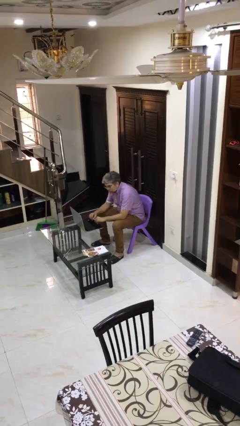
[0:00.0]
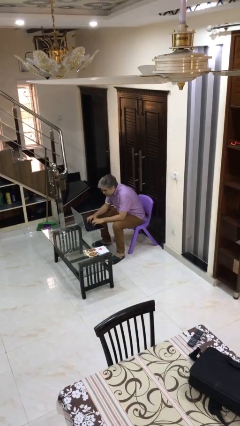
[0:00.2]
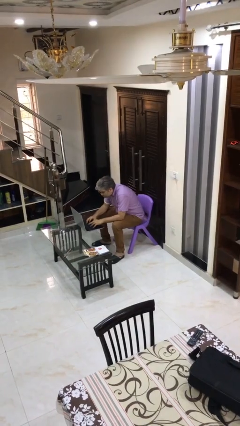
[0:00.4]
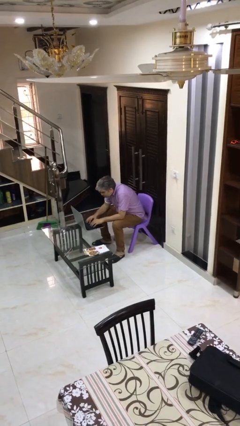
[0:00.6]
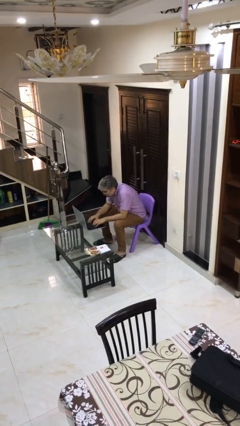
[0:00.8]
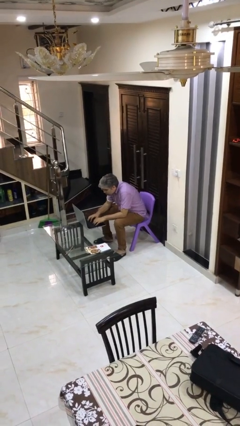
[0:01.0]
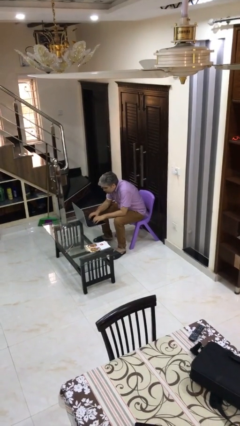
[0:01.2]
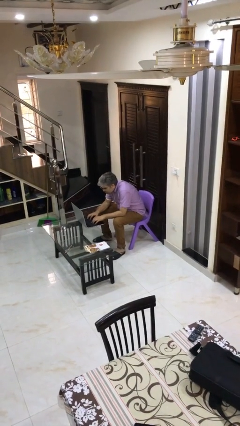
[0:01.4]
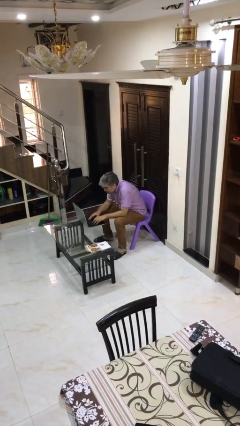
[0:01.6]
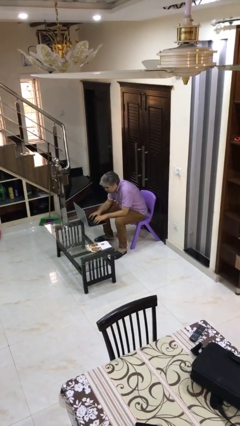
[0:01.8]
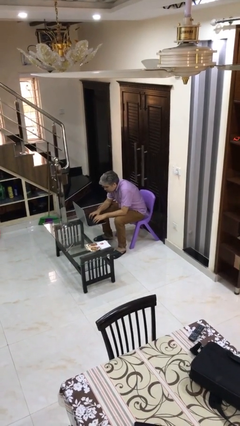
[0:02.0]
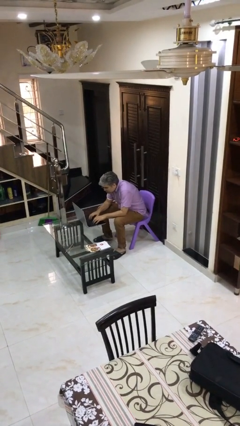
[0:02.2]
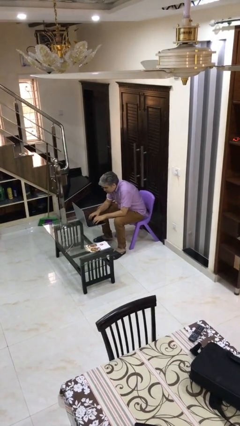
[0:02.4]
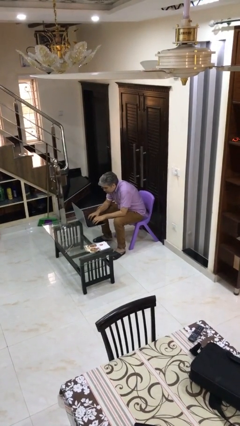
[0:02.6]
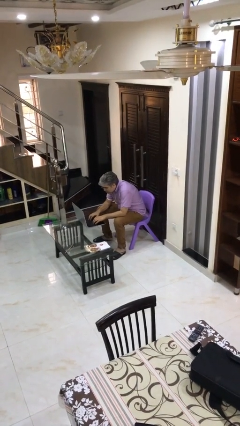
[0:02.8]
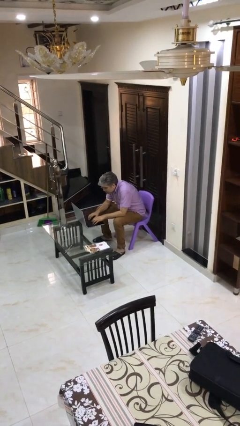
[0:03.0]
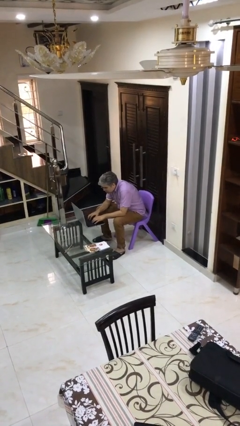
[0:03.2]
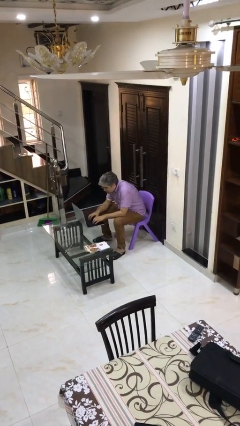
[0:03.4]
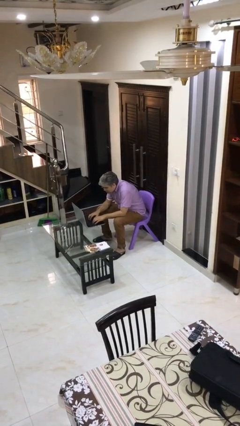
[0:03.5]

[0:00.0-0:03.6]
person interacts with laptop

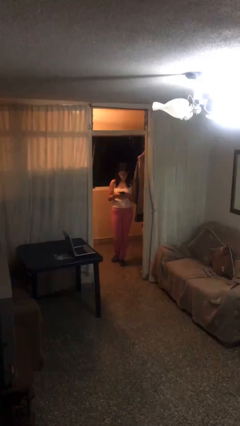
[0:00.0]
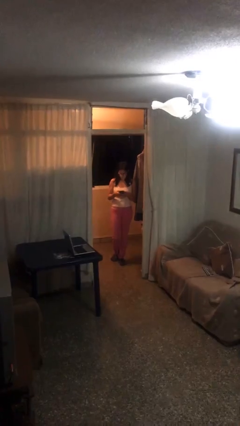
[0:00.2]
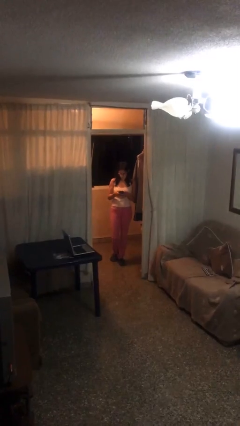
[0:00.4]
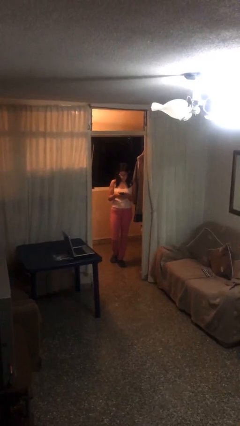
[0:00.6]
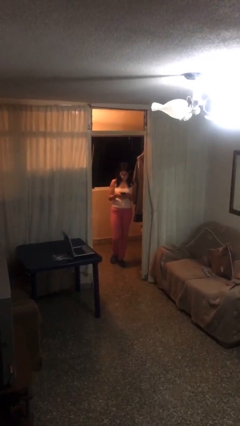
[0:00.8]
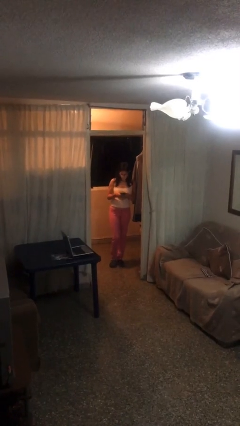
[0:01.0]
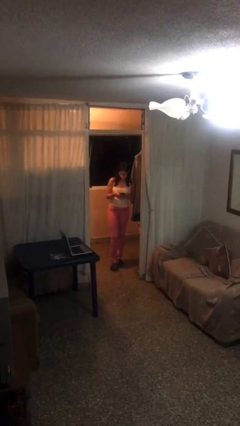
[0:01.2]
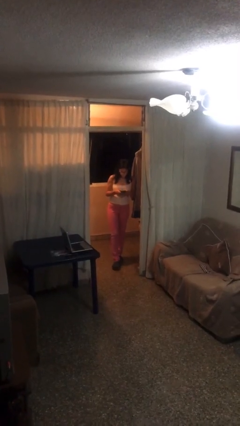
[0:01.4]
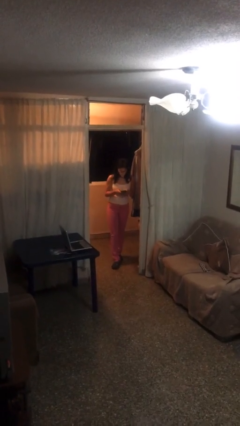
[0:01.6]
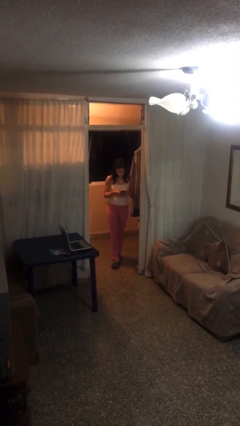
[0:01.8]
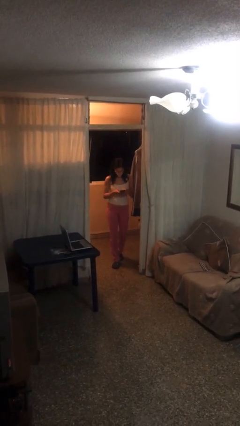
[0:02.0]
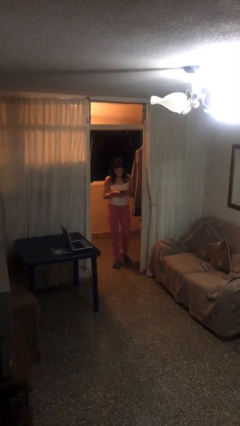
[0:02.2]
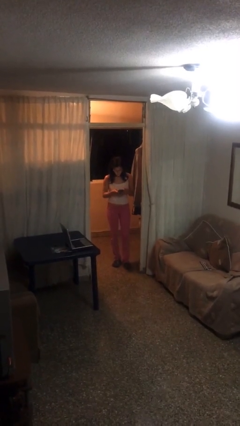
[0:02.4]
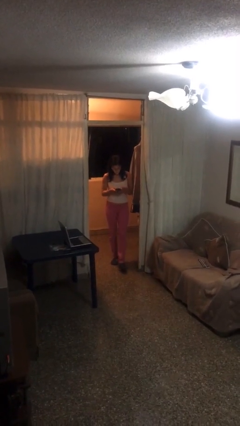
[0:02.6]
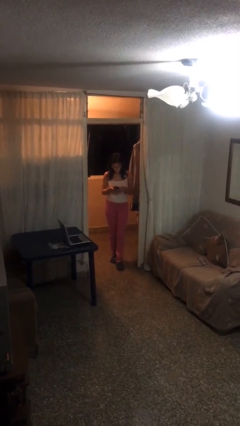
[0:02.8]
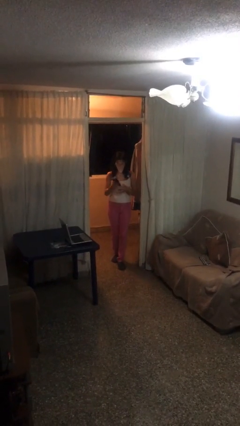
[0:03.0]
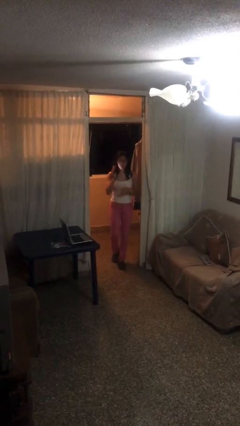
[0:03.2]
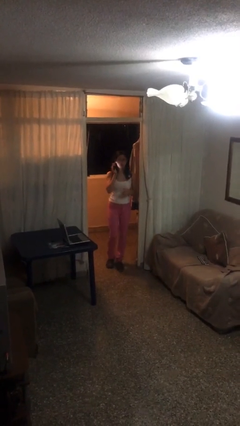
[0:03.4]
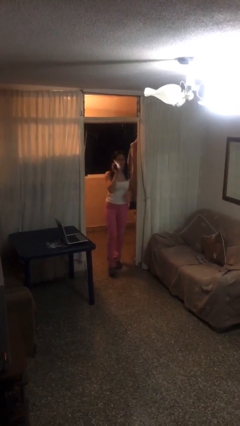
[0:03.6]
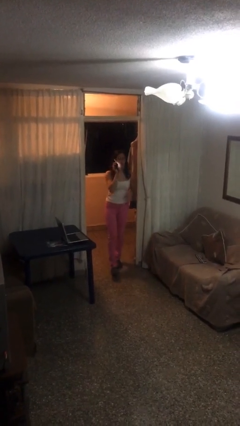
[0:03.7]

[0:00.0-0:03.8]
person texts on phone

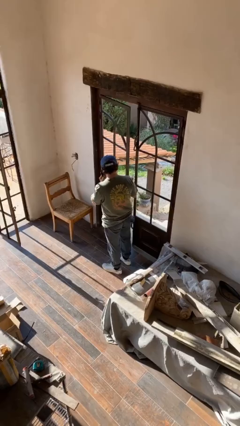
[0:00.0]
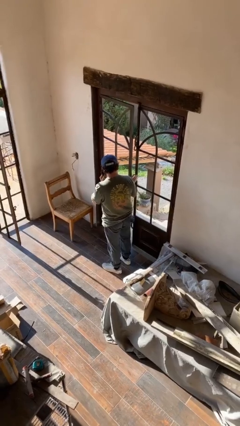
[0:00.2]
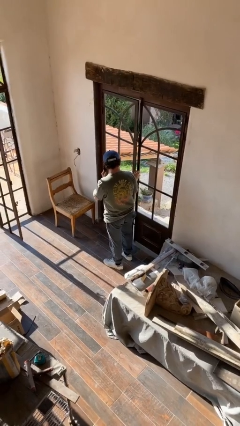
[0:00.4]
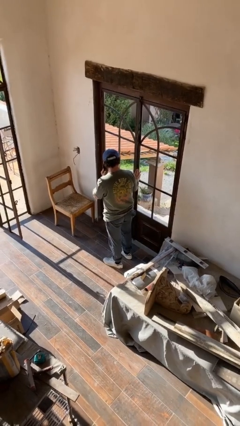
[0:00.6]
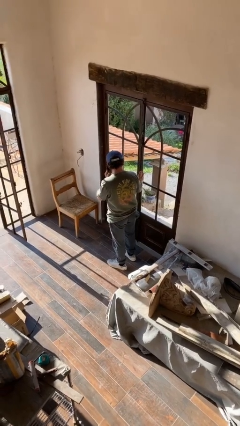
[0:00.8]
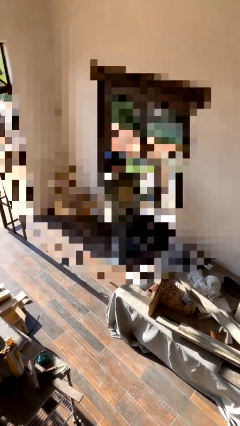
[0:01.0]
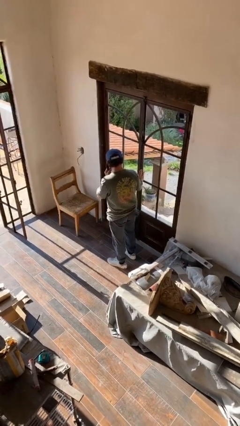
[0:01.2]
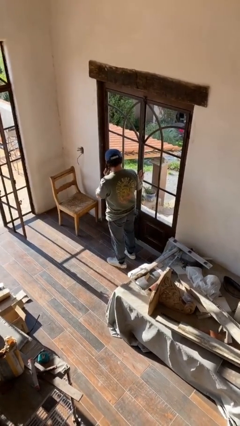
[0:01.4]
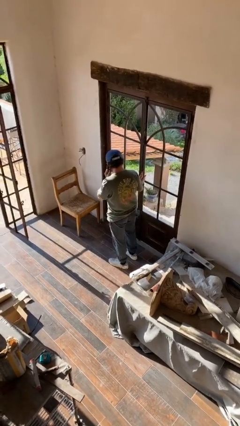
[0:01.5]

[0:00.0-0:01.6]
person closes facility door

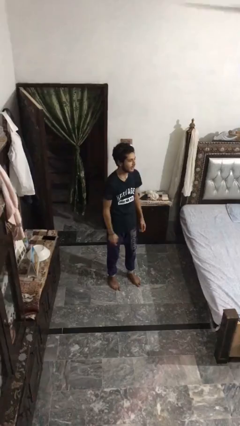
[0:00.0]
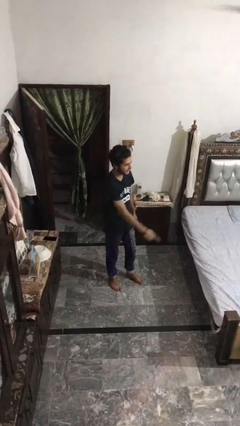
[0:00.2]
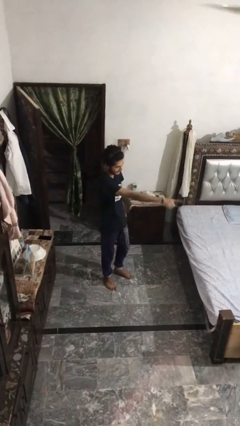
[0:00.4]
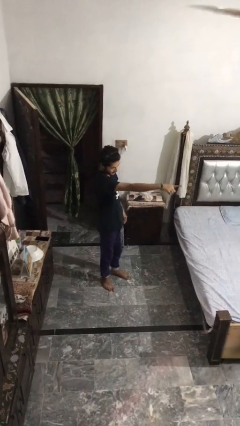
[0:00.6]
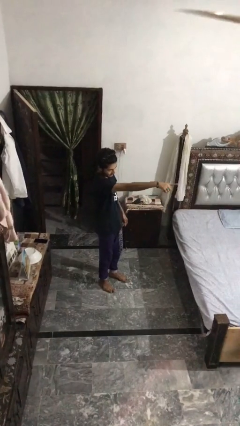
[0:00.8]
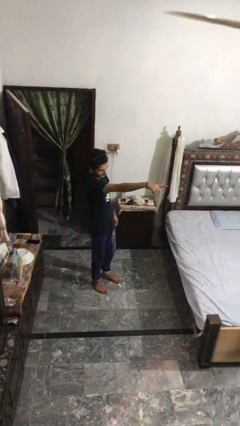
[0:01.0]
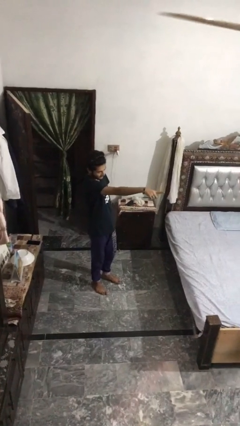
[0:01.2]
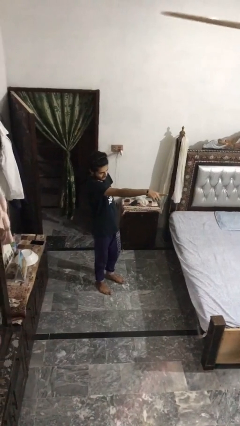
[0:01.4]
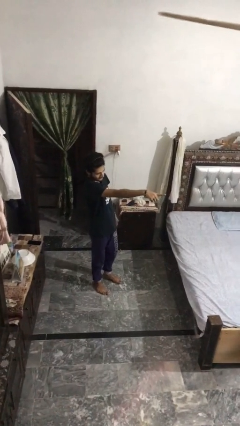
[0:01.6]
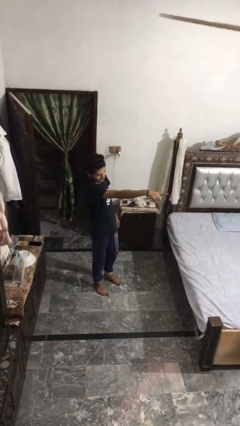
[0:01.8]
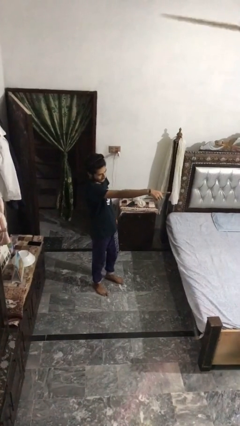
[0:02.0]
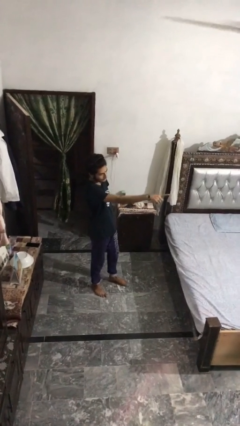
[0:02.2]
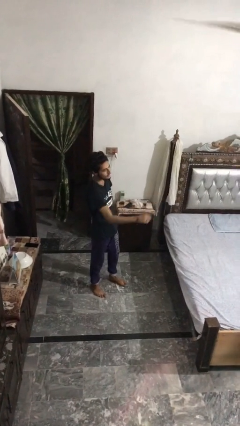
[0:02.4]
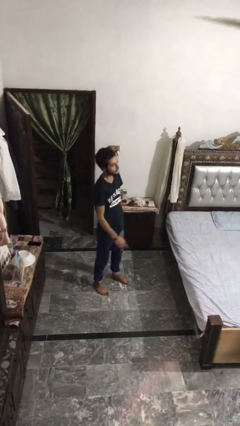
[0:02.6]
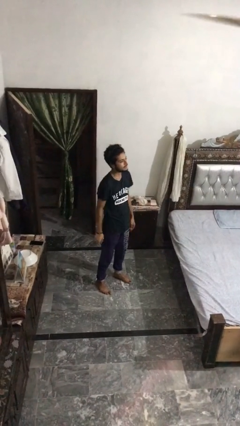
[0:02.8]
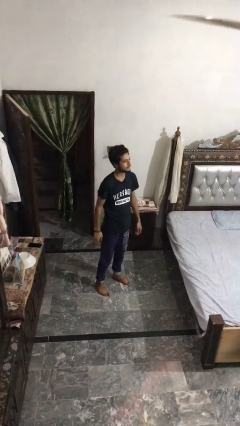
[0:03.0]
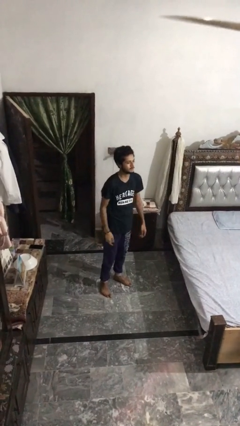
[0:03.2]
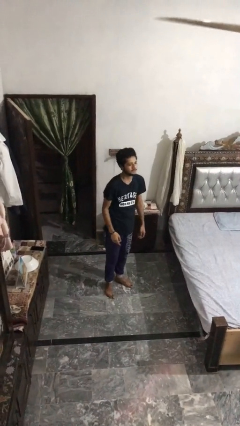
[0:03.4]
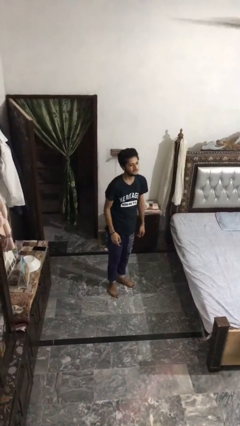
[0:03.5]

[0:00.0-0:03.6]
person points at person

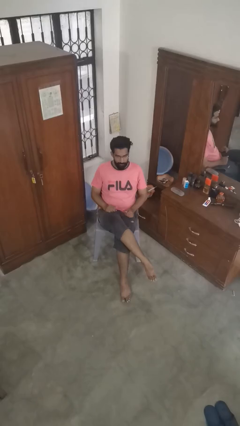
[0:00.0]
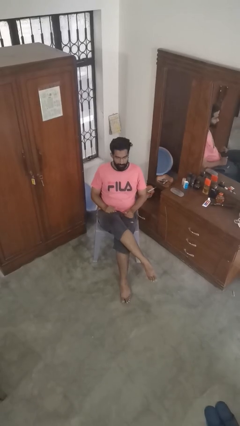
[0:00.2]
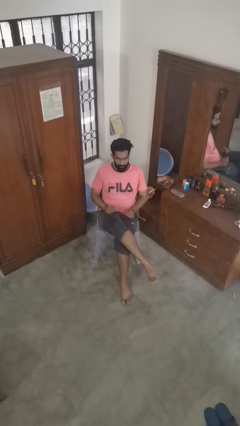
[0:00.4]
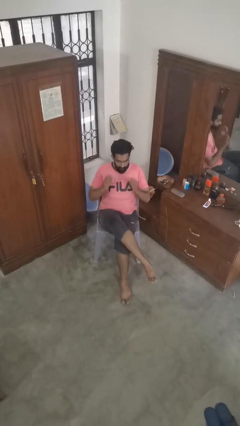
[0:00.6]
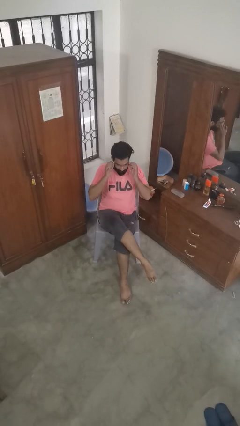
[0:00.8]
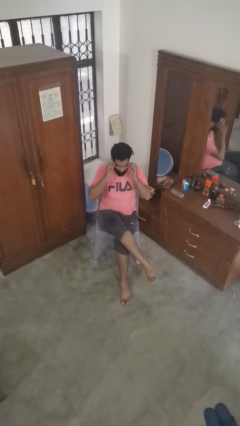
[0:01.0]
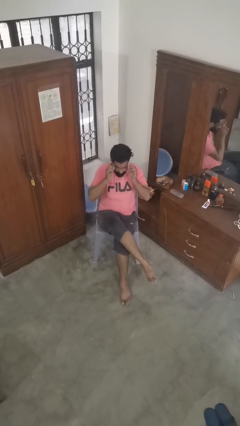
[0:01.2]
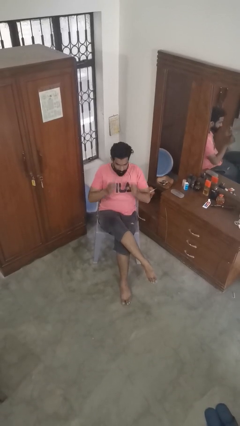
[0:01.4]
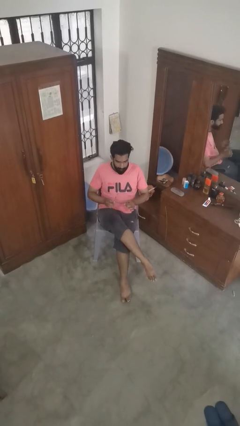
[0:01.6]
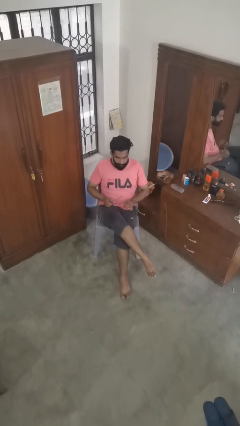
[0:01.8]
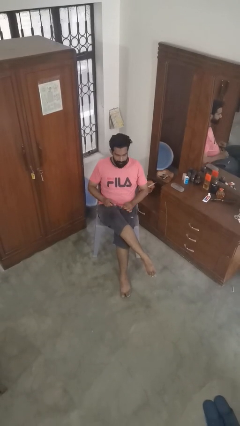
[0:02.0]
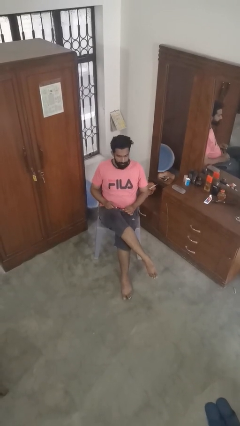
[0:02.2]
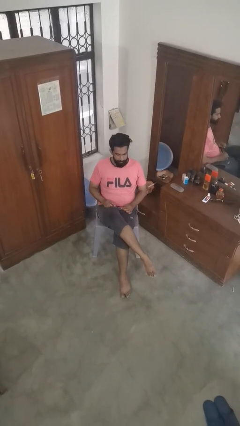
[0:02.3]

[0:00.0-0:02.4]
person takes off glasses

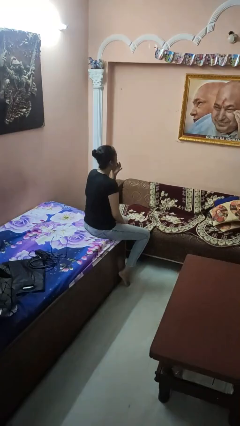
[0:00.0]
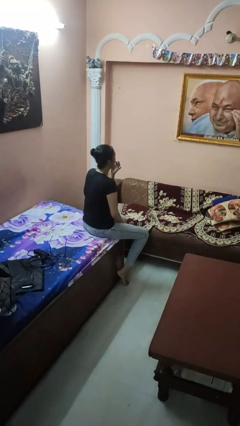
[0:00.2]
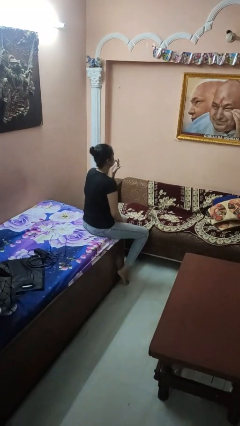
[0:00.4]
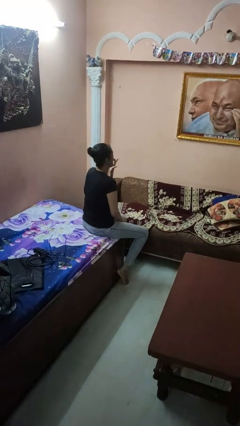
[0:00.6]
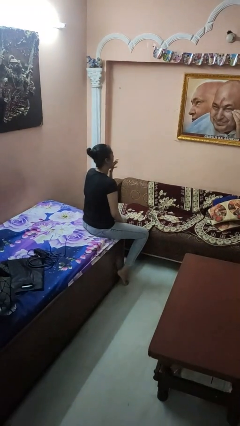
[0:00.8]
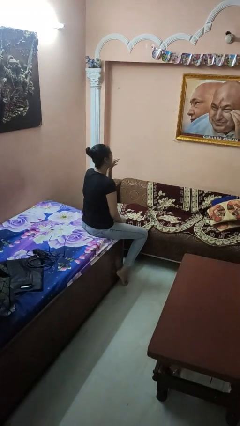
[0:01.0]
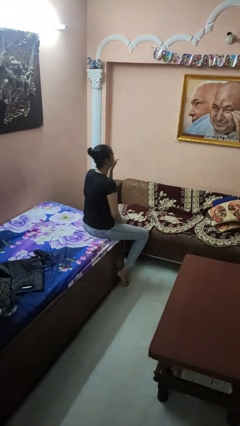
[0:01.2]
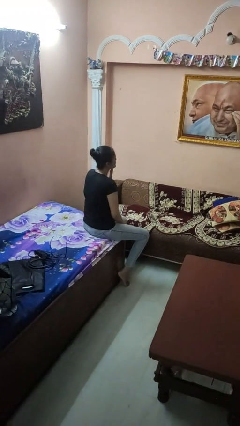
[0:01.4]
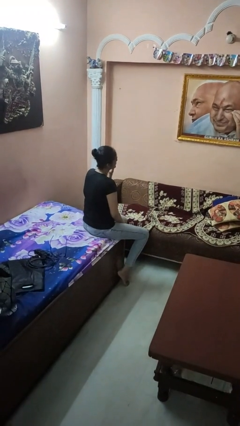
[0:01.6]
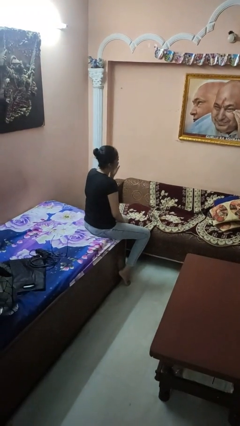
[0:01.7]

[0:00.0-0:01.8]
person licks fingers

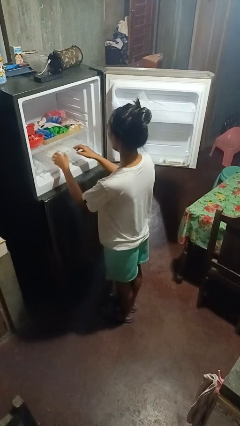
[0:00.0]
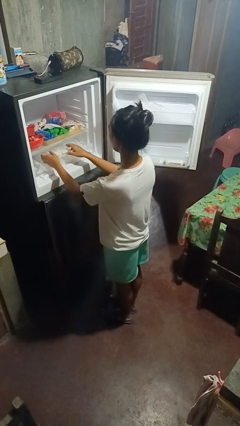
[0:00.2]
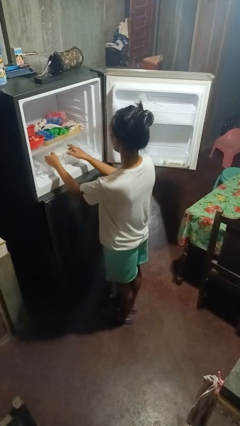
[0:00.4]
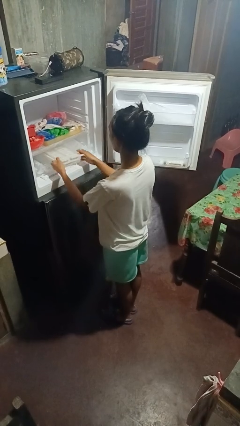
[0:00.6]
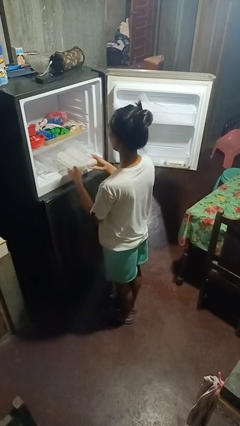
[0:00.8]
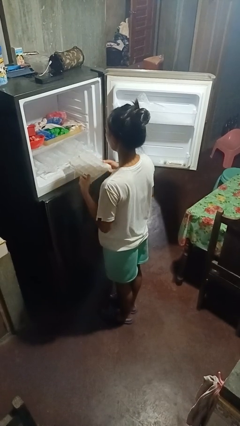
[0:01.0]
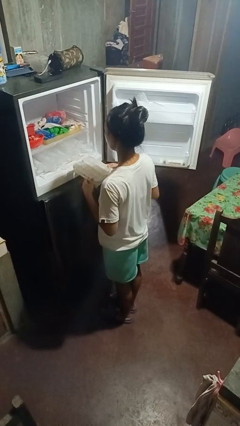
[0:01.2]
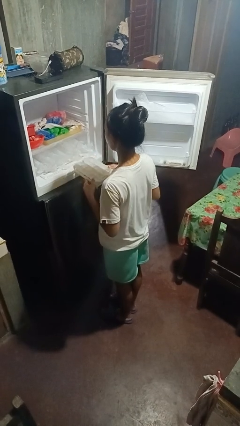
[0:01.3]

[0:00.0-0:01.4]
person takes object from refrigerator
